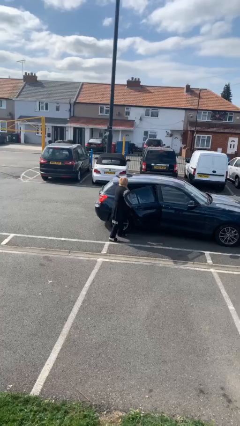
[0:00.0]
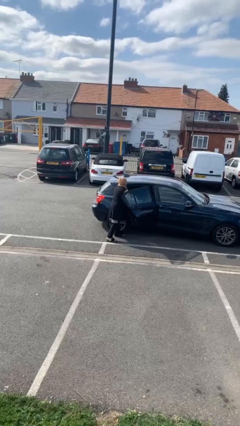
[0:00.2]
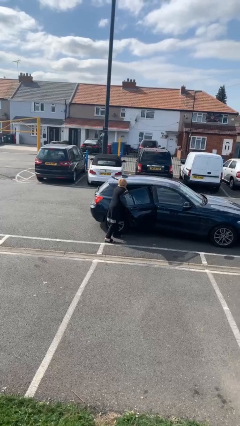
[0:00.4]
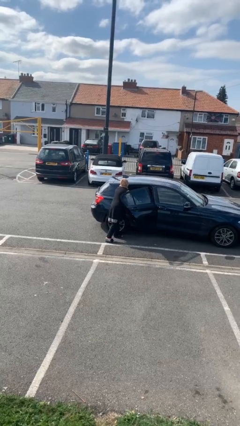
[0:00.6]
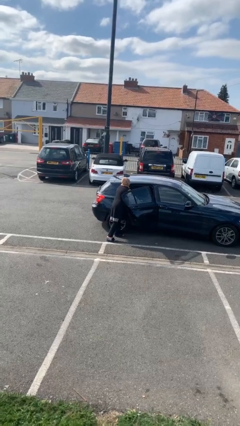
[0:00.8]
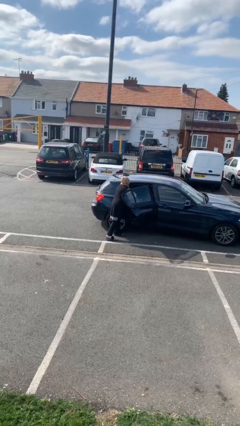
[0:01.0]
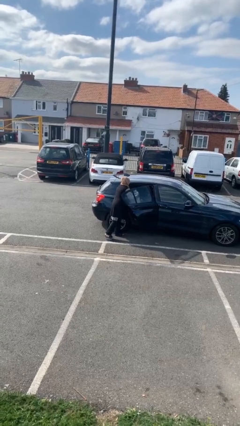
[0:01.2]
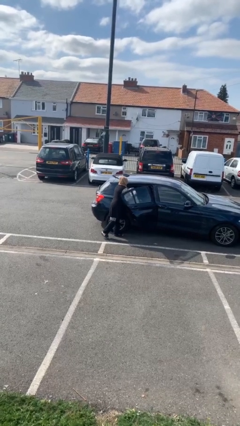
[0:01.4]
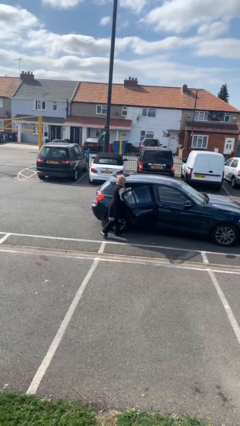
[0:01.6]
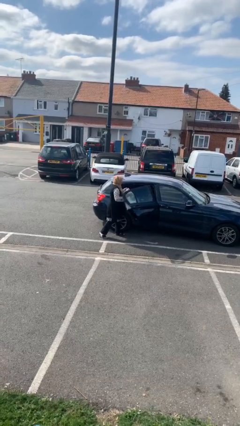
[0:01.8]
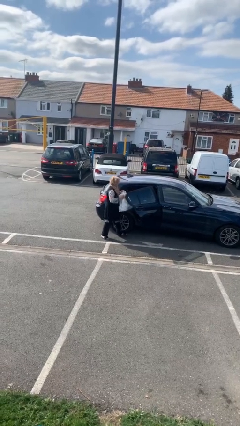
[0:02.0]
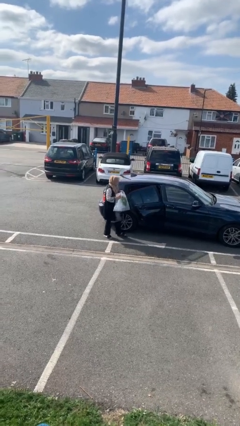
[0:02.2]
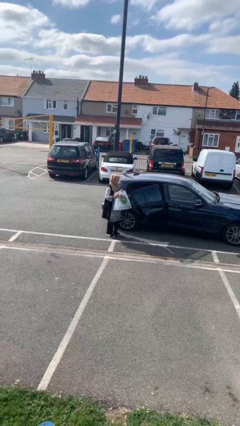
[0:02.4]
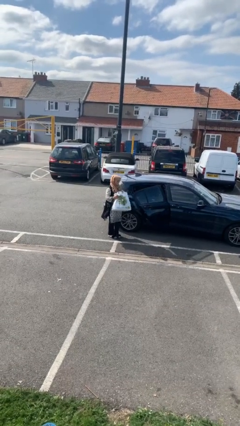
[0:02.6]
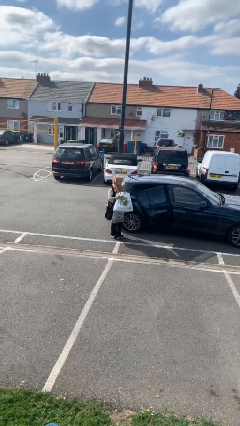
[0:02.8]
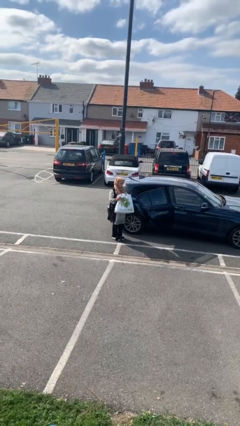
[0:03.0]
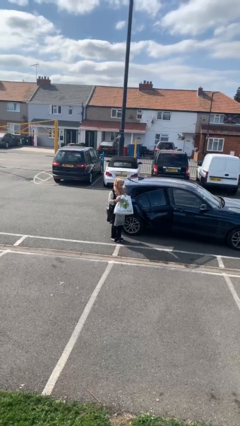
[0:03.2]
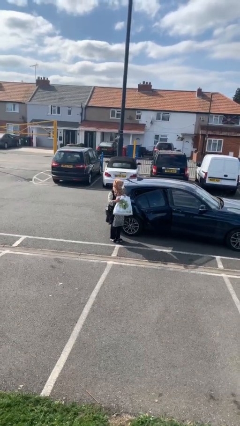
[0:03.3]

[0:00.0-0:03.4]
person unloads car

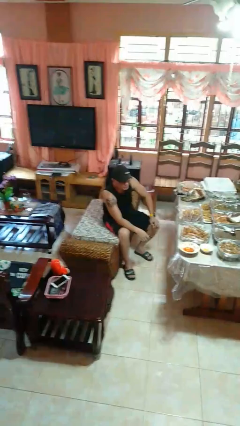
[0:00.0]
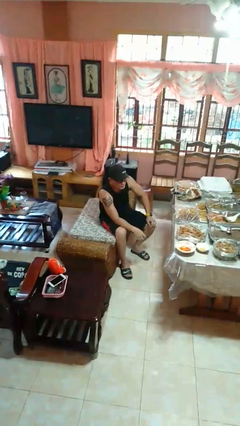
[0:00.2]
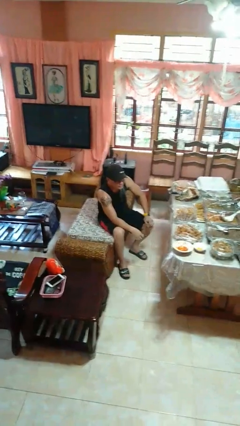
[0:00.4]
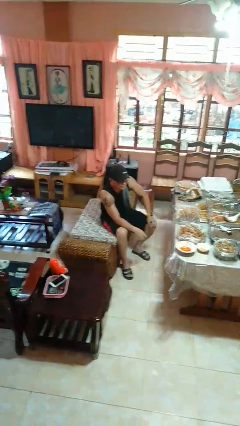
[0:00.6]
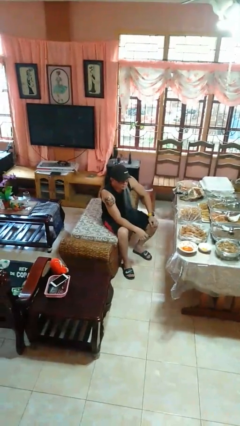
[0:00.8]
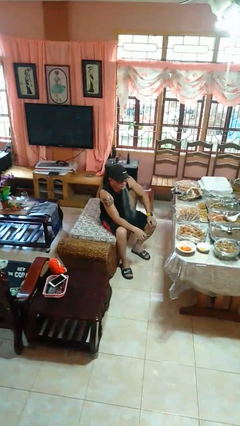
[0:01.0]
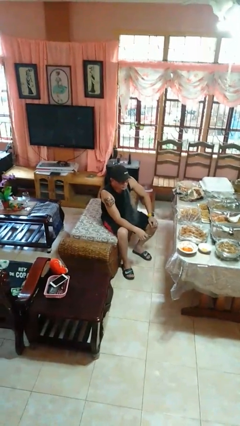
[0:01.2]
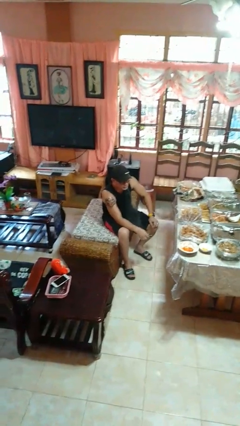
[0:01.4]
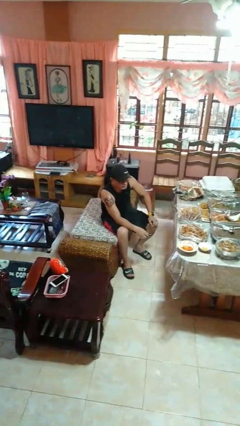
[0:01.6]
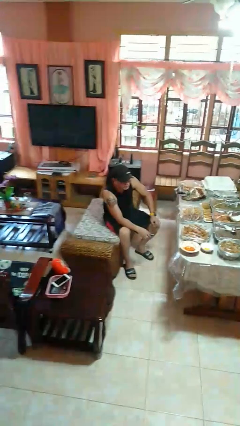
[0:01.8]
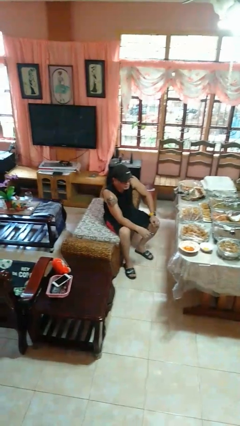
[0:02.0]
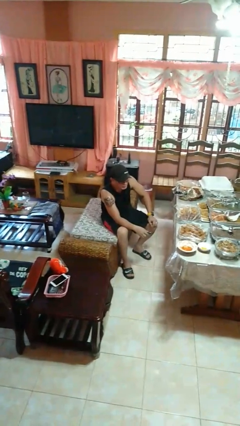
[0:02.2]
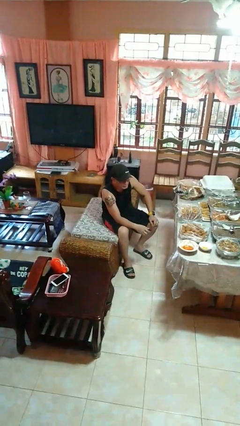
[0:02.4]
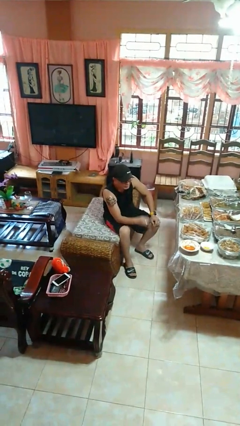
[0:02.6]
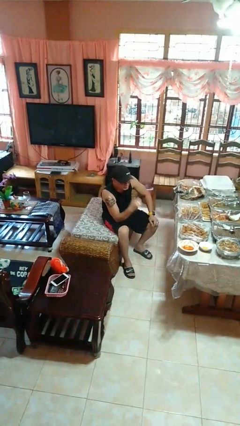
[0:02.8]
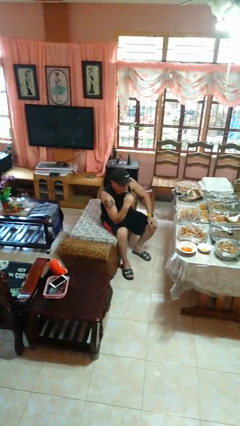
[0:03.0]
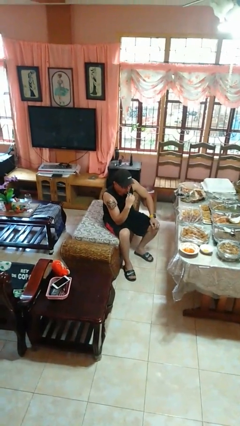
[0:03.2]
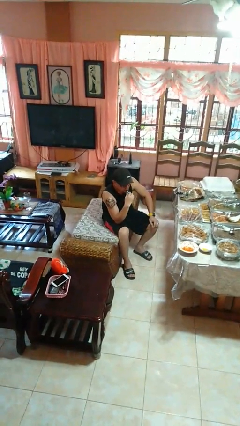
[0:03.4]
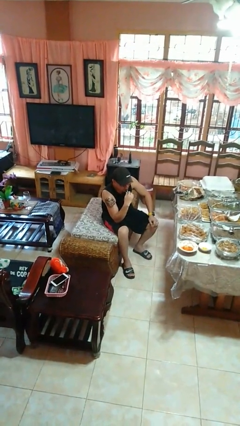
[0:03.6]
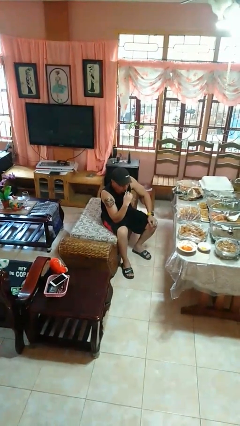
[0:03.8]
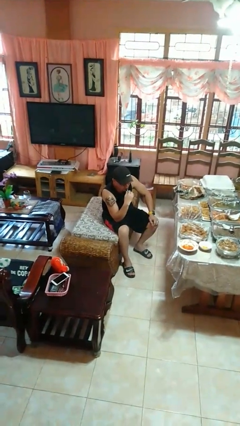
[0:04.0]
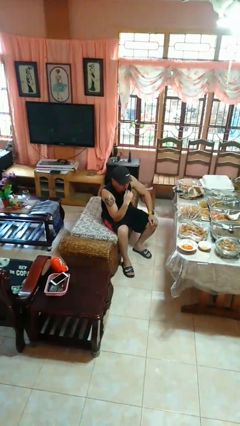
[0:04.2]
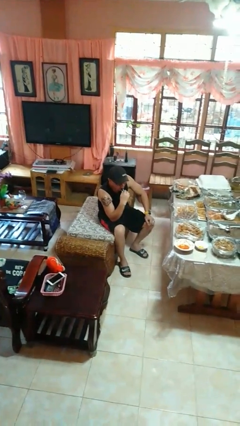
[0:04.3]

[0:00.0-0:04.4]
person vapes

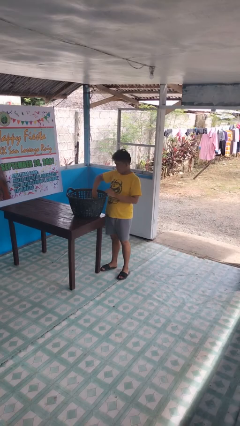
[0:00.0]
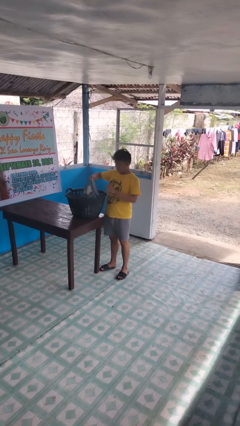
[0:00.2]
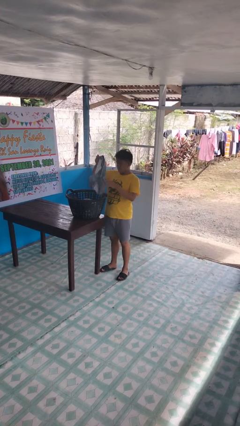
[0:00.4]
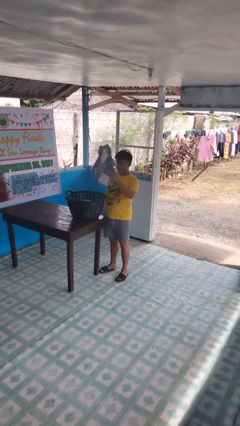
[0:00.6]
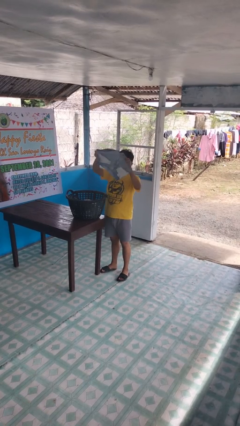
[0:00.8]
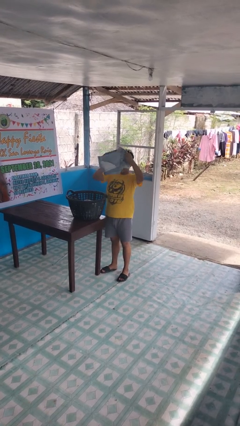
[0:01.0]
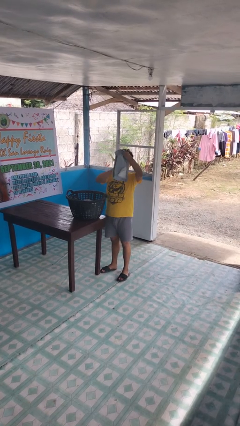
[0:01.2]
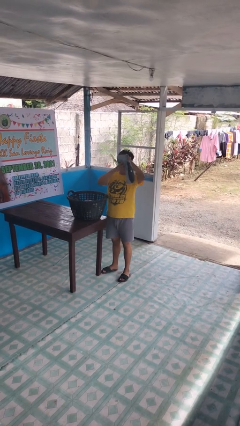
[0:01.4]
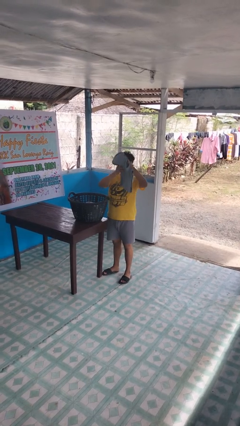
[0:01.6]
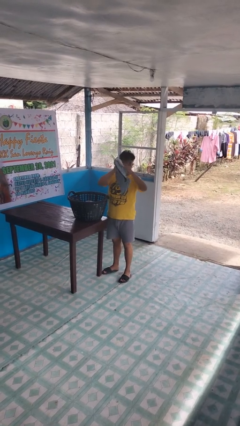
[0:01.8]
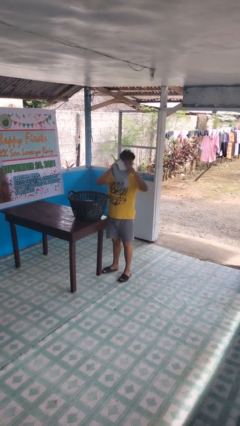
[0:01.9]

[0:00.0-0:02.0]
person takes object from basket

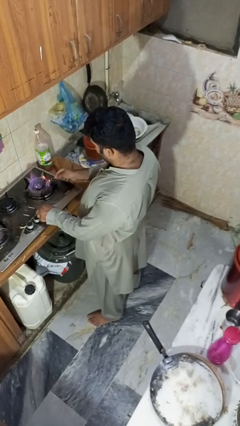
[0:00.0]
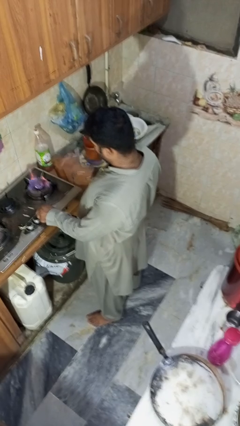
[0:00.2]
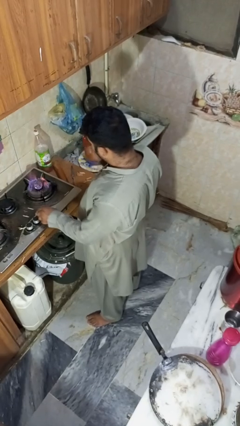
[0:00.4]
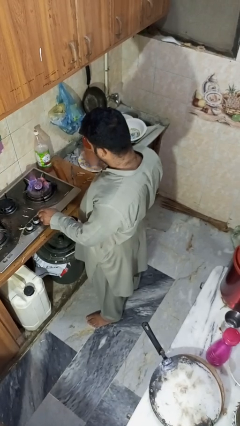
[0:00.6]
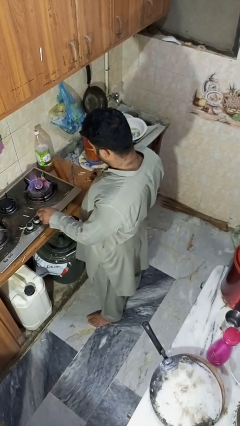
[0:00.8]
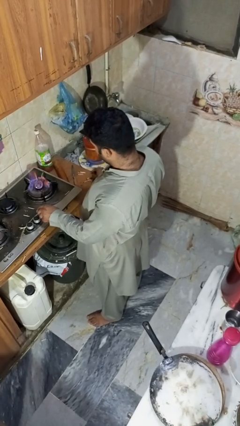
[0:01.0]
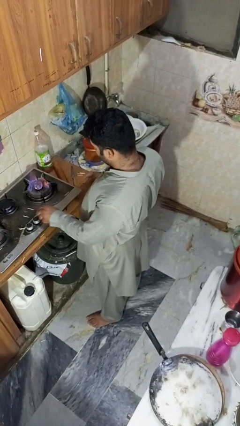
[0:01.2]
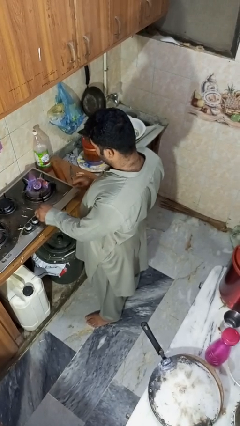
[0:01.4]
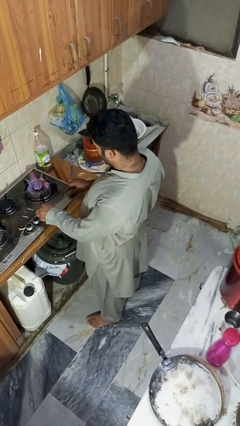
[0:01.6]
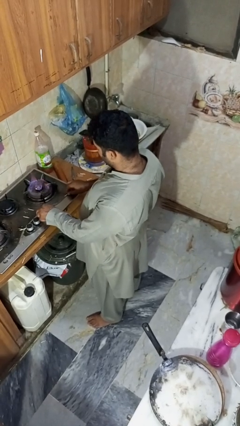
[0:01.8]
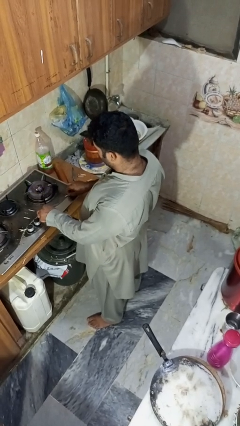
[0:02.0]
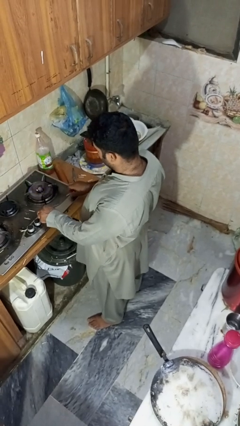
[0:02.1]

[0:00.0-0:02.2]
person turns off stovetop

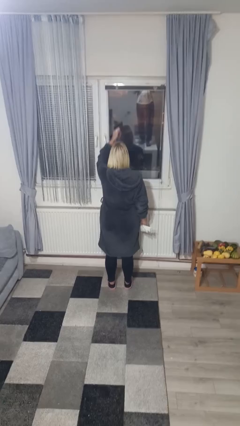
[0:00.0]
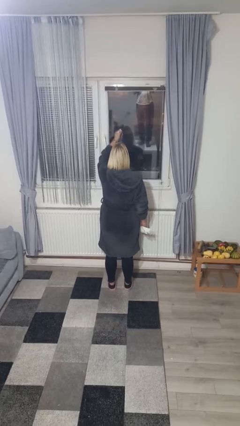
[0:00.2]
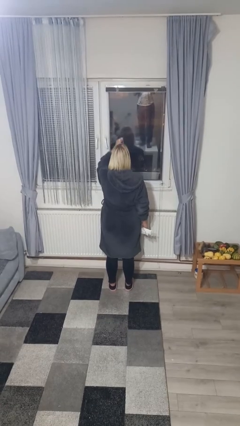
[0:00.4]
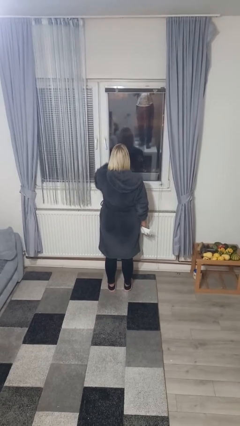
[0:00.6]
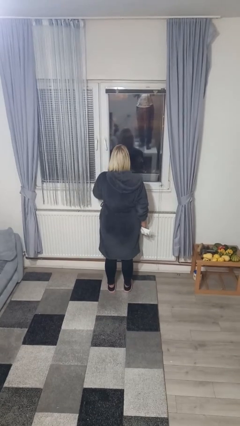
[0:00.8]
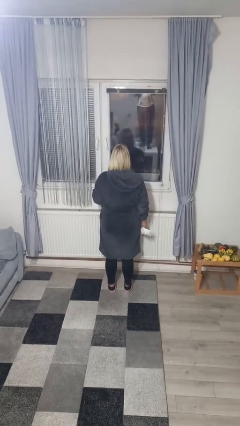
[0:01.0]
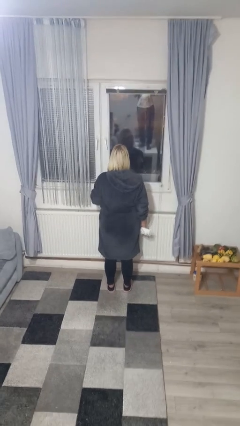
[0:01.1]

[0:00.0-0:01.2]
person sprays from bottle

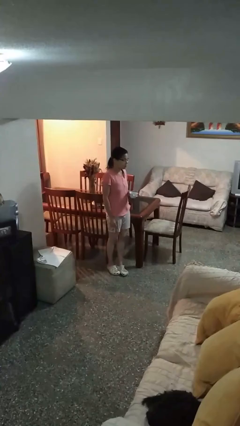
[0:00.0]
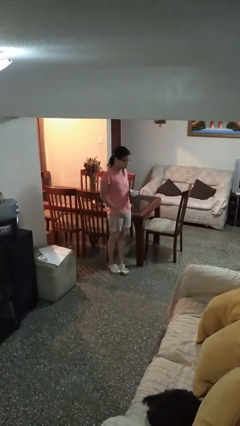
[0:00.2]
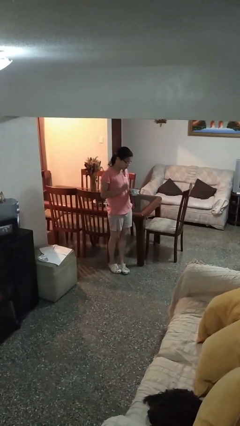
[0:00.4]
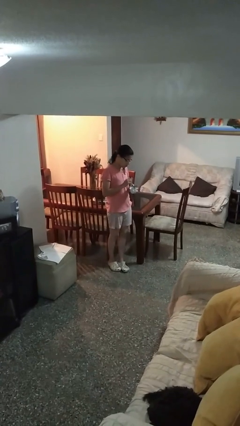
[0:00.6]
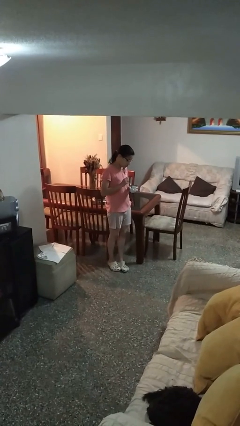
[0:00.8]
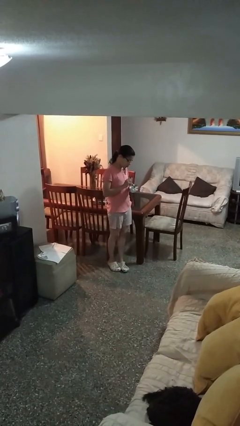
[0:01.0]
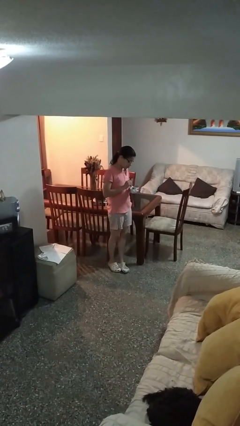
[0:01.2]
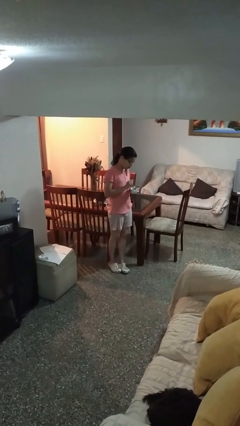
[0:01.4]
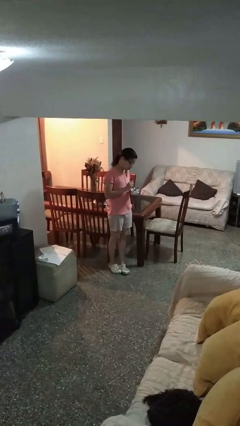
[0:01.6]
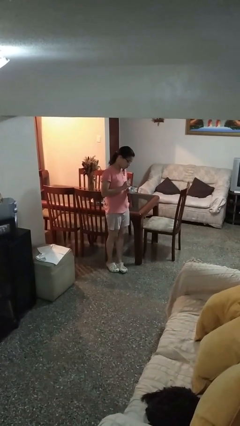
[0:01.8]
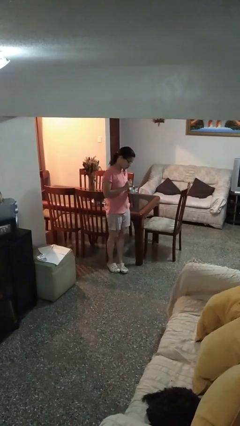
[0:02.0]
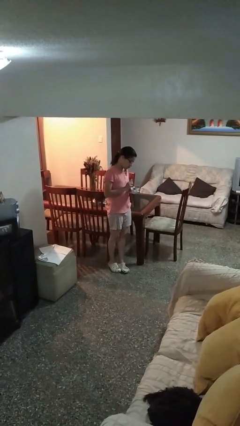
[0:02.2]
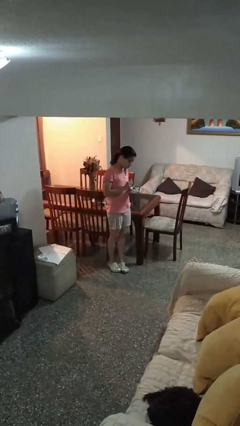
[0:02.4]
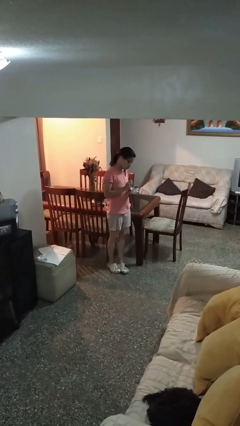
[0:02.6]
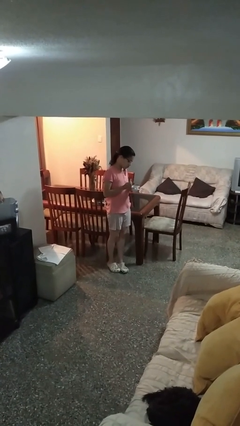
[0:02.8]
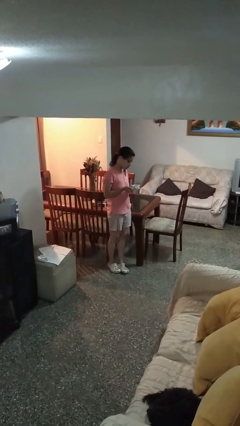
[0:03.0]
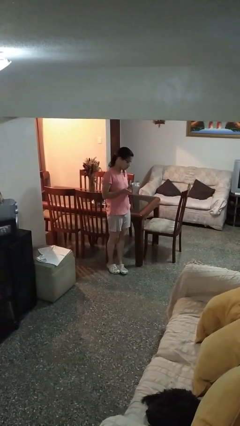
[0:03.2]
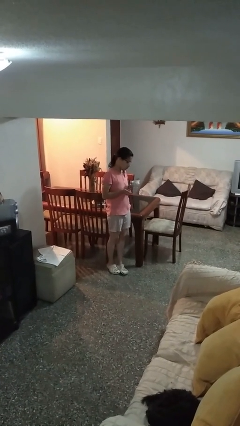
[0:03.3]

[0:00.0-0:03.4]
person stirs mug

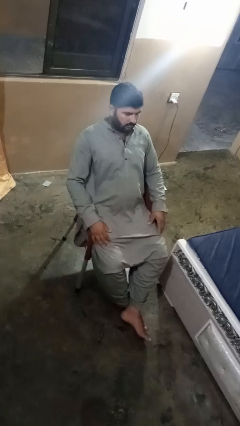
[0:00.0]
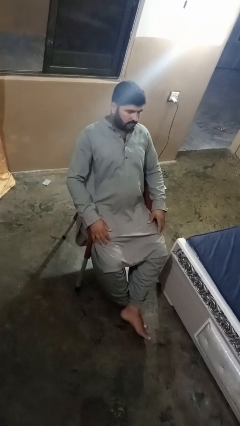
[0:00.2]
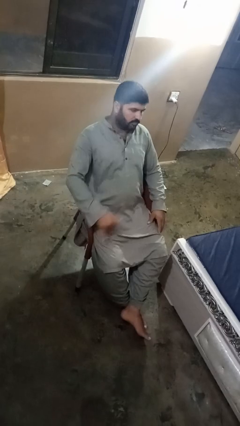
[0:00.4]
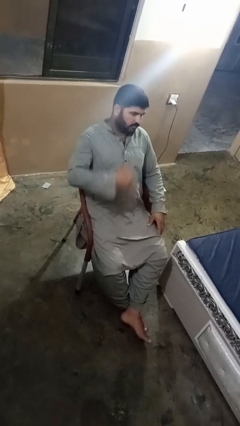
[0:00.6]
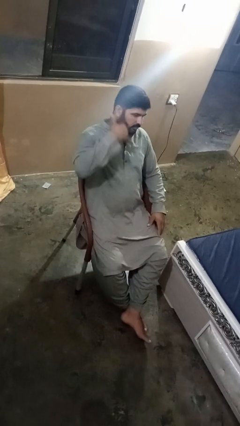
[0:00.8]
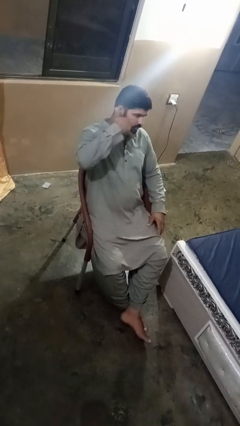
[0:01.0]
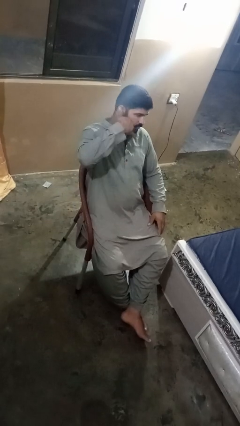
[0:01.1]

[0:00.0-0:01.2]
person gestures call me
